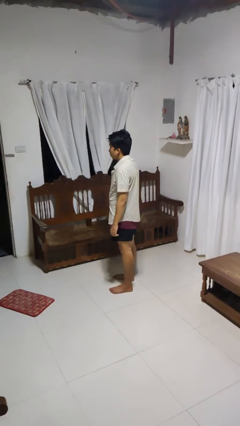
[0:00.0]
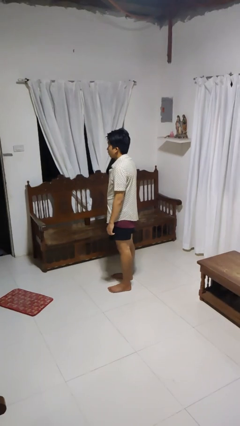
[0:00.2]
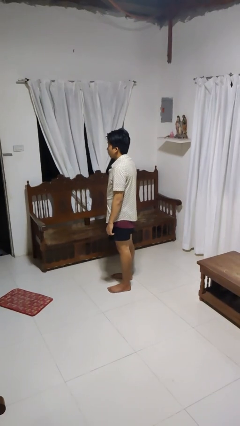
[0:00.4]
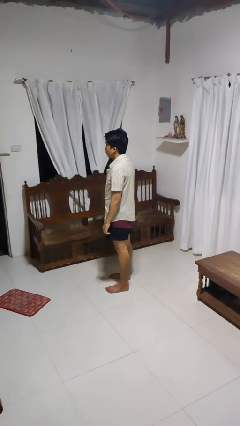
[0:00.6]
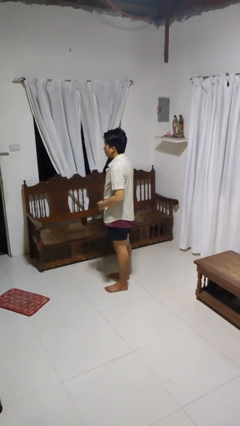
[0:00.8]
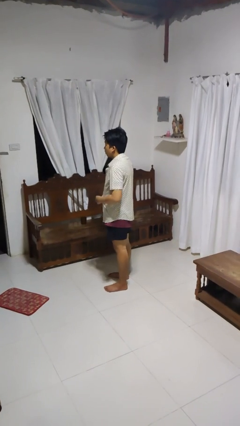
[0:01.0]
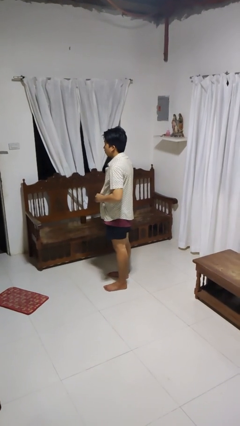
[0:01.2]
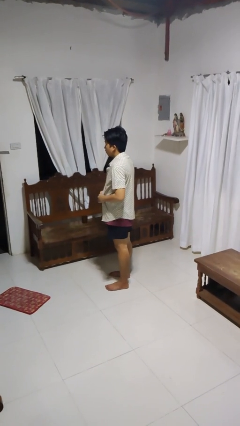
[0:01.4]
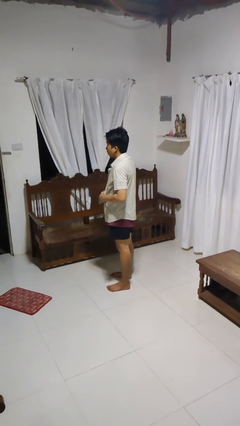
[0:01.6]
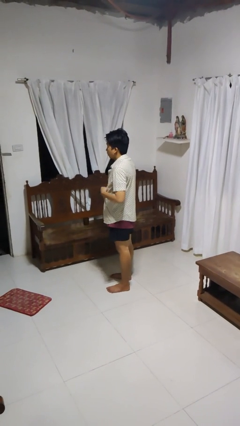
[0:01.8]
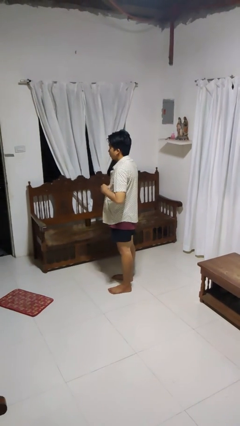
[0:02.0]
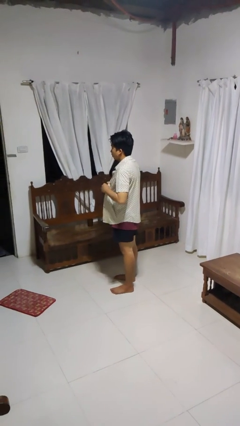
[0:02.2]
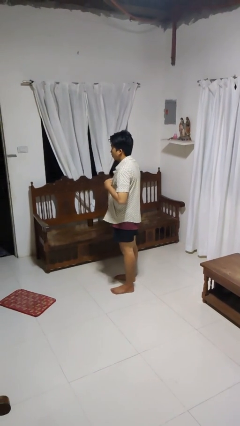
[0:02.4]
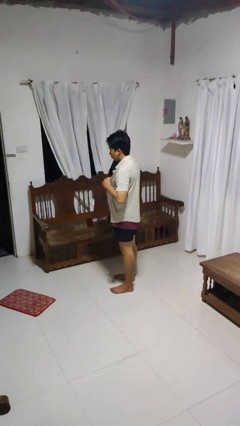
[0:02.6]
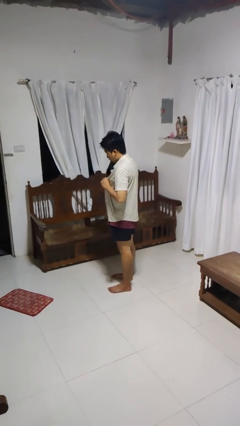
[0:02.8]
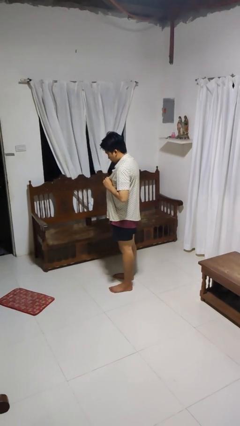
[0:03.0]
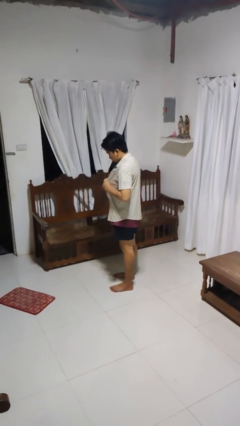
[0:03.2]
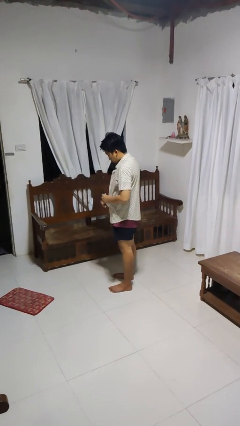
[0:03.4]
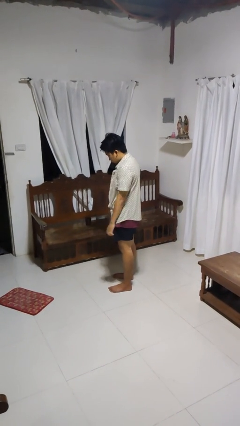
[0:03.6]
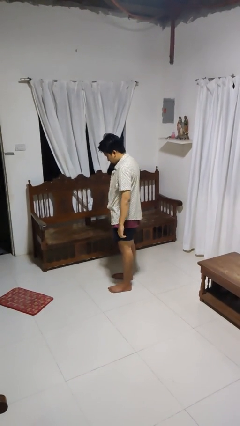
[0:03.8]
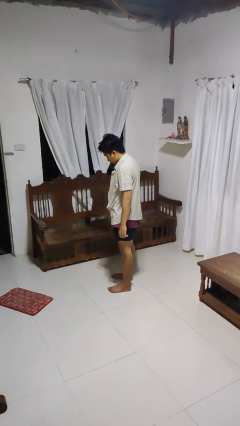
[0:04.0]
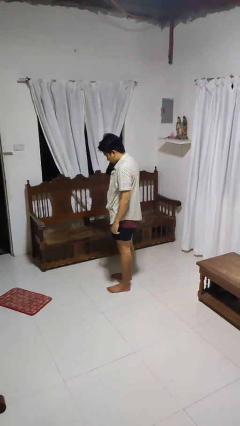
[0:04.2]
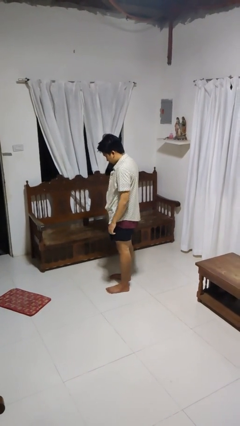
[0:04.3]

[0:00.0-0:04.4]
person unbuttons shirt

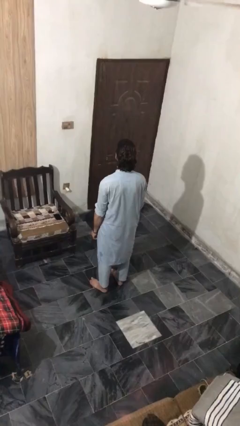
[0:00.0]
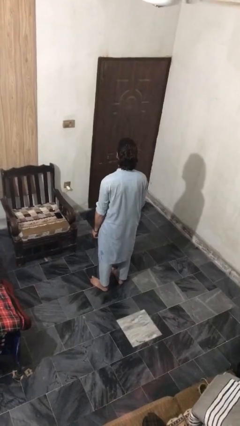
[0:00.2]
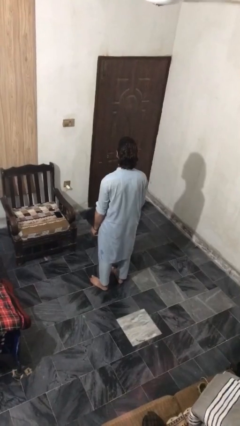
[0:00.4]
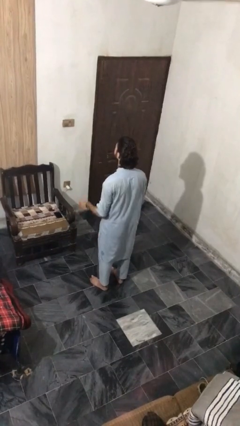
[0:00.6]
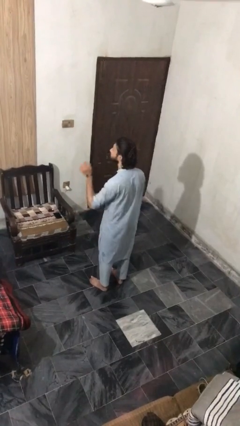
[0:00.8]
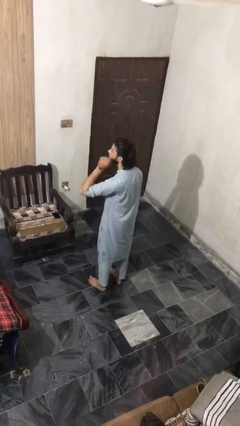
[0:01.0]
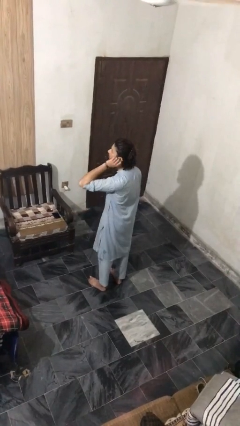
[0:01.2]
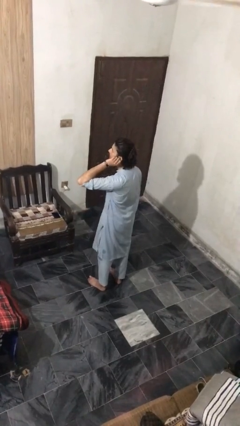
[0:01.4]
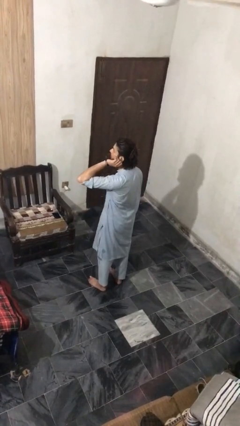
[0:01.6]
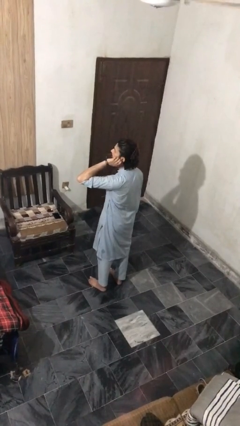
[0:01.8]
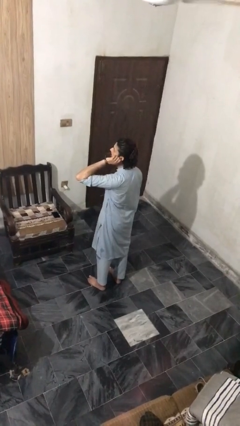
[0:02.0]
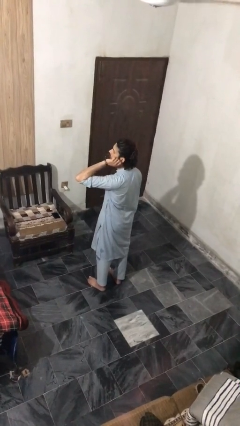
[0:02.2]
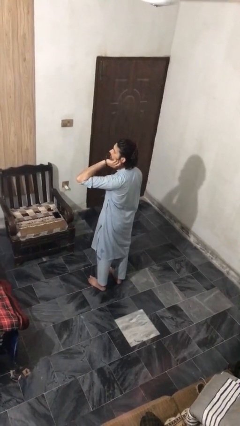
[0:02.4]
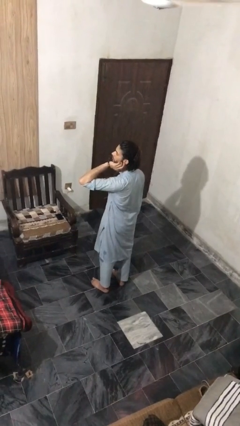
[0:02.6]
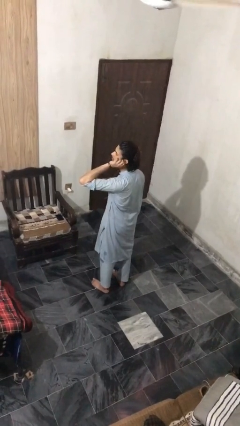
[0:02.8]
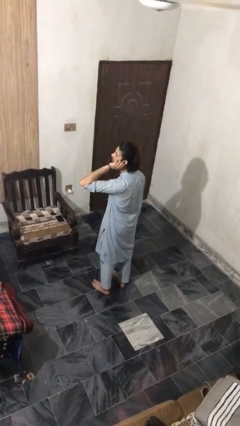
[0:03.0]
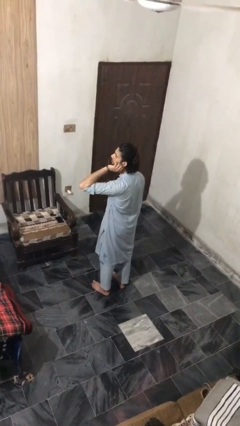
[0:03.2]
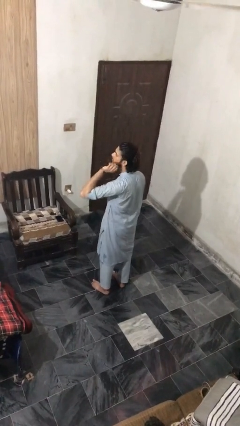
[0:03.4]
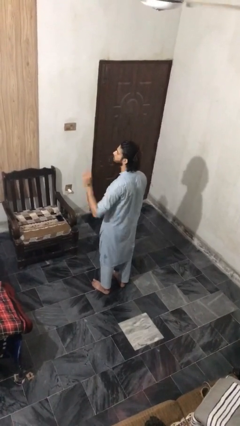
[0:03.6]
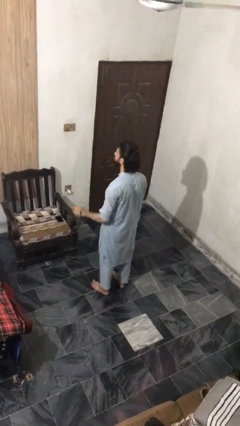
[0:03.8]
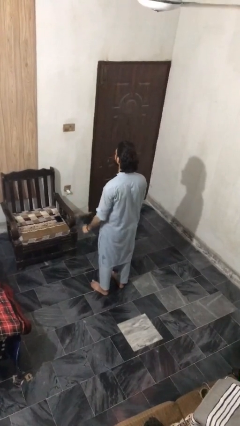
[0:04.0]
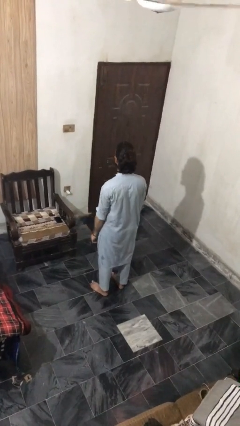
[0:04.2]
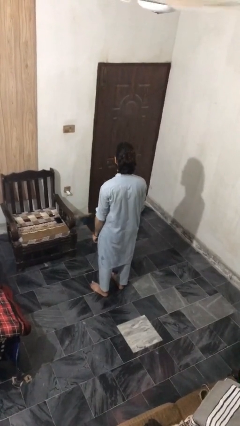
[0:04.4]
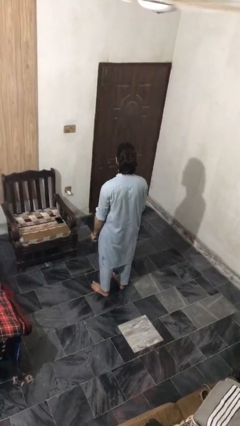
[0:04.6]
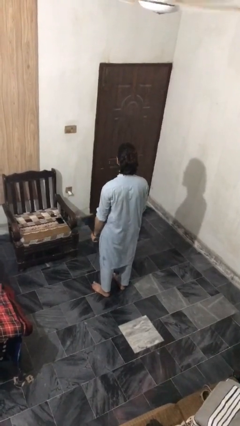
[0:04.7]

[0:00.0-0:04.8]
person touches earlobe

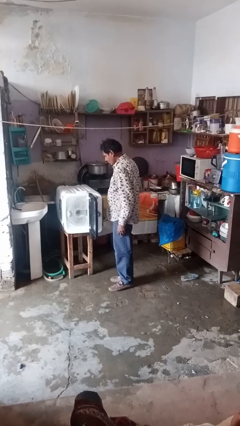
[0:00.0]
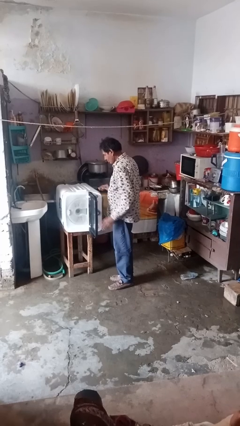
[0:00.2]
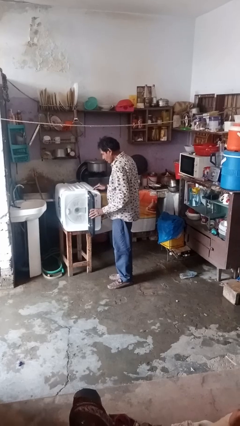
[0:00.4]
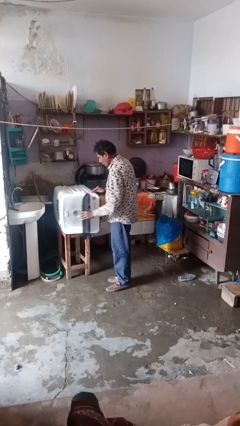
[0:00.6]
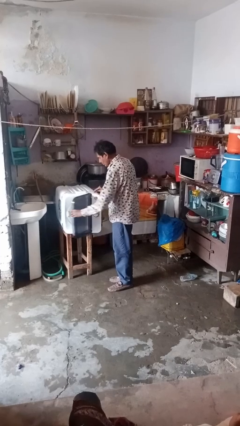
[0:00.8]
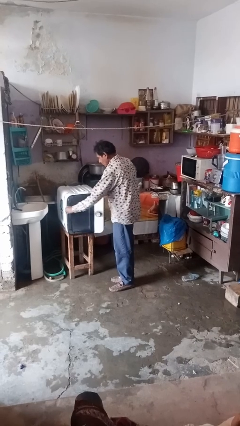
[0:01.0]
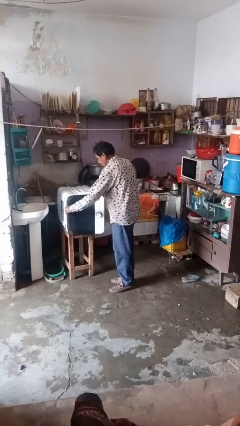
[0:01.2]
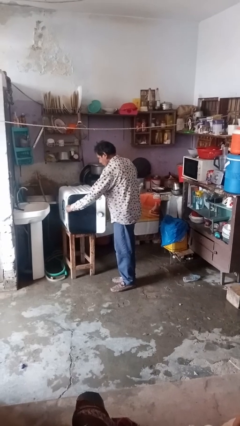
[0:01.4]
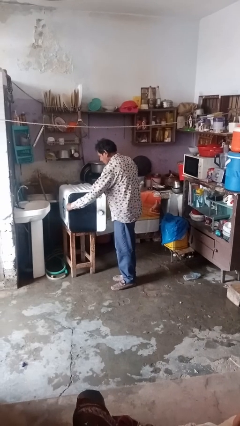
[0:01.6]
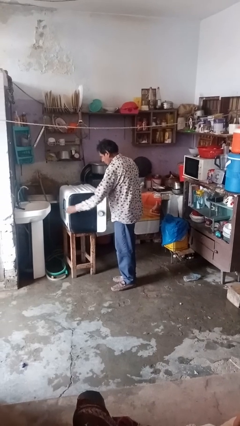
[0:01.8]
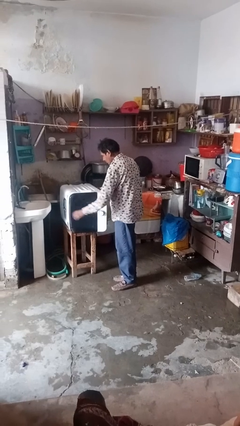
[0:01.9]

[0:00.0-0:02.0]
person closes dishwasher

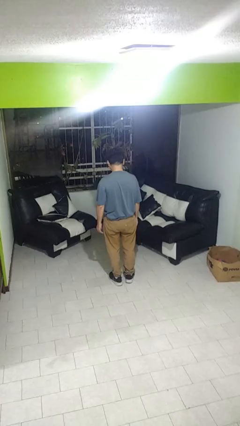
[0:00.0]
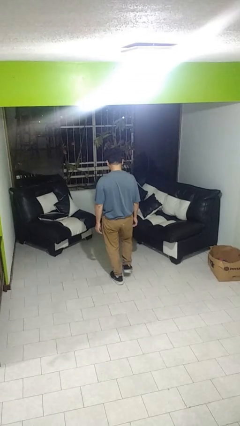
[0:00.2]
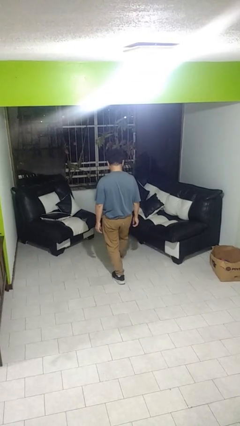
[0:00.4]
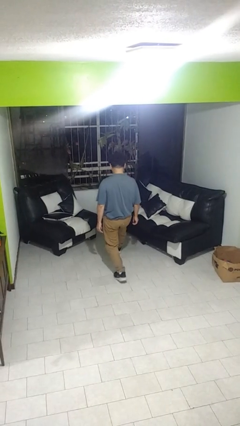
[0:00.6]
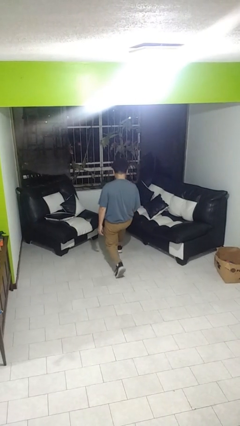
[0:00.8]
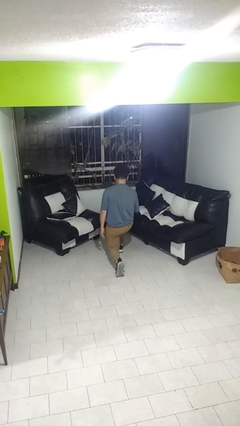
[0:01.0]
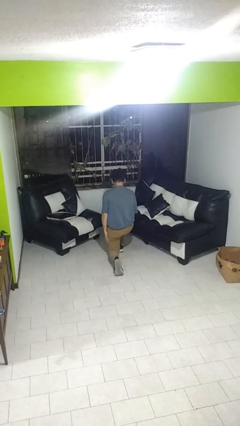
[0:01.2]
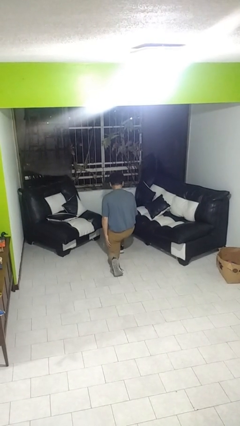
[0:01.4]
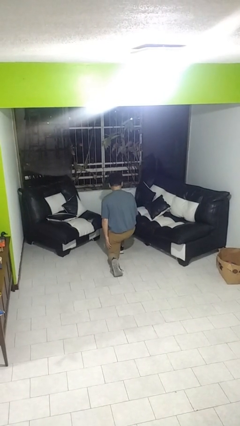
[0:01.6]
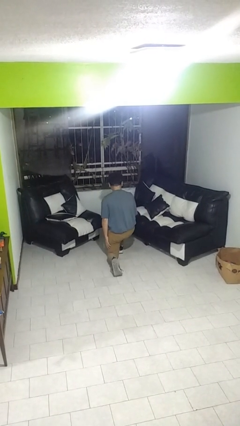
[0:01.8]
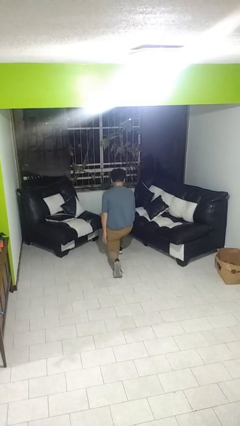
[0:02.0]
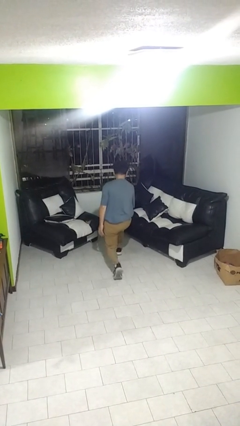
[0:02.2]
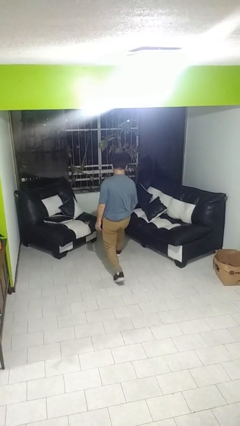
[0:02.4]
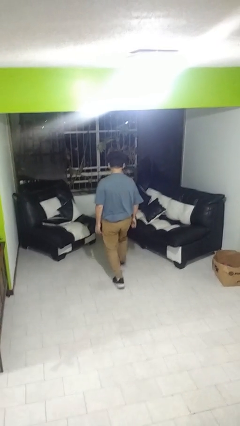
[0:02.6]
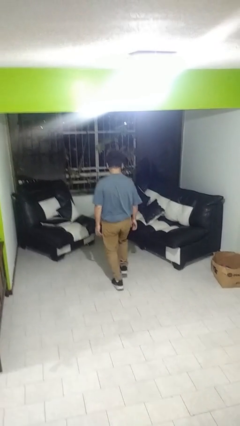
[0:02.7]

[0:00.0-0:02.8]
person exercises with lunges

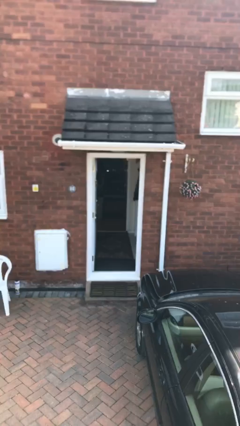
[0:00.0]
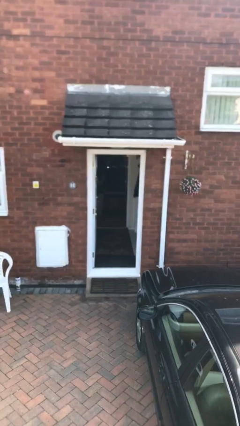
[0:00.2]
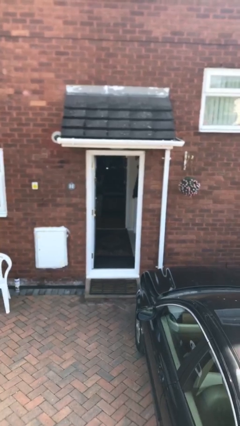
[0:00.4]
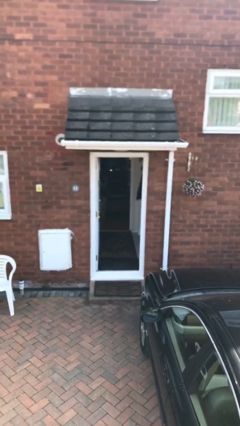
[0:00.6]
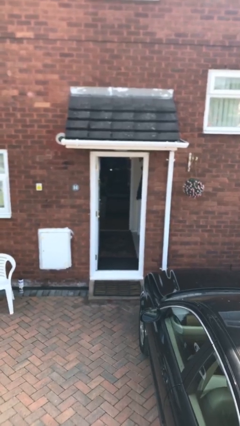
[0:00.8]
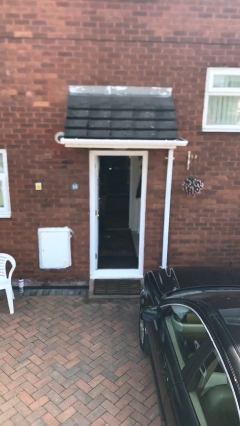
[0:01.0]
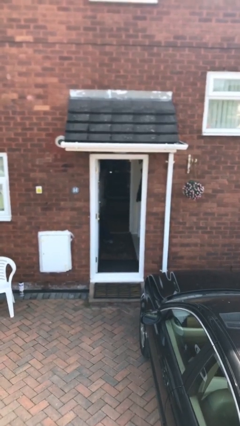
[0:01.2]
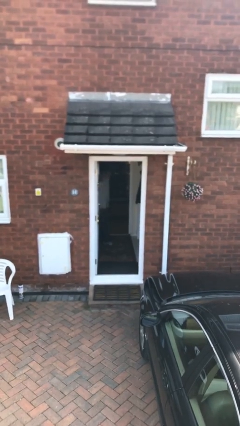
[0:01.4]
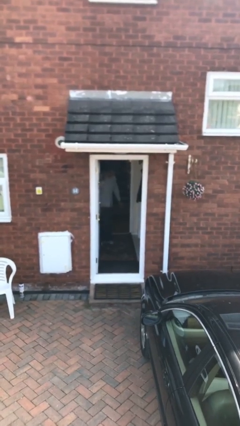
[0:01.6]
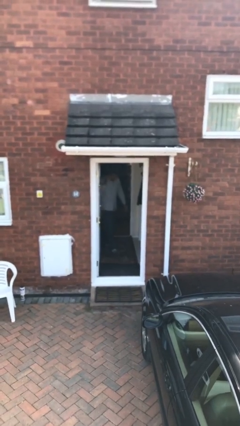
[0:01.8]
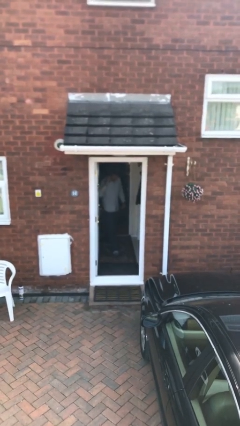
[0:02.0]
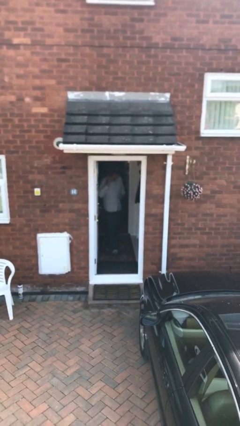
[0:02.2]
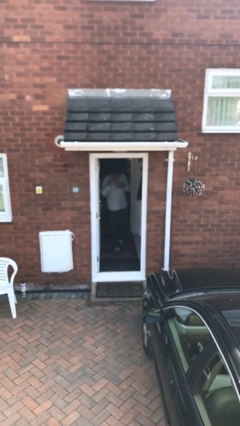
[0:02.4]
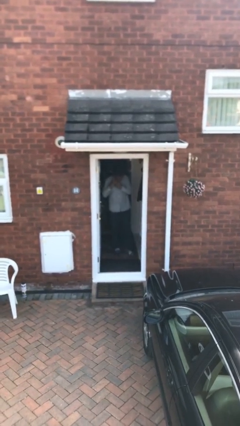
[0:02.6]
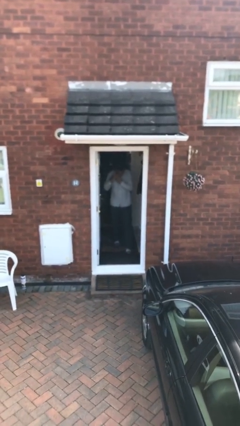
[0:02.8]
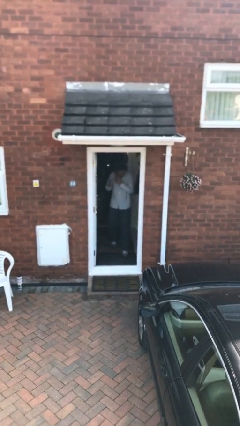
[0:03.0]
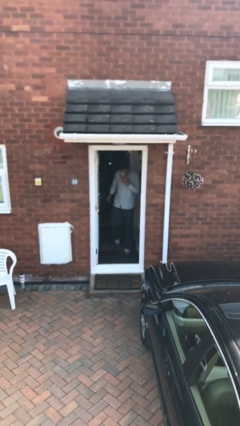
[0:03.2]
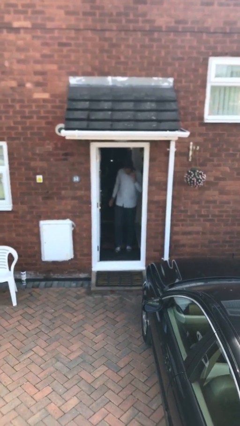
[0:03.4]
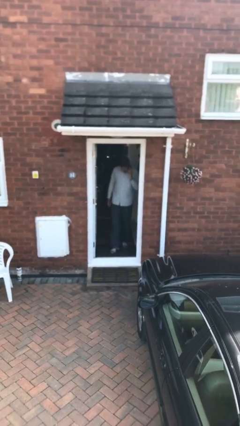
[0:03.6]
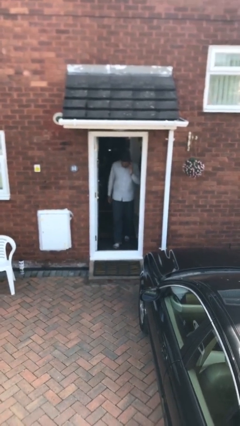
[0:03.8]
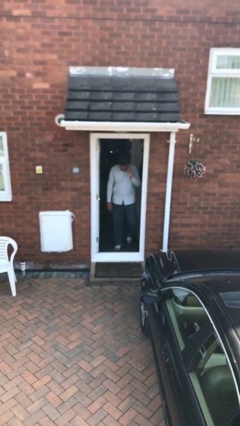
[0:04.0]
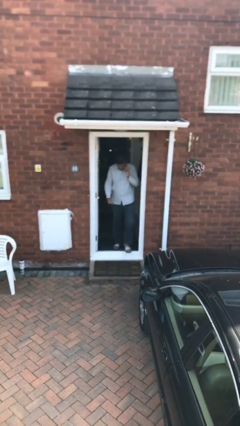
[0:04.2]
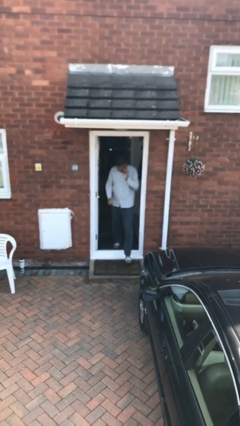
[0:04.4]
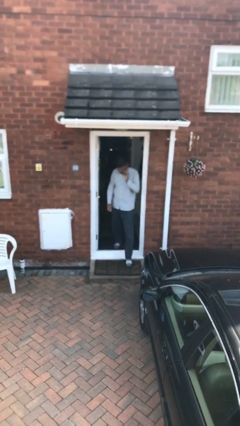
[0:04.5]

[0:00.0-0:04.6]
person enters scene through structure
